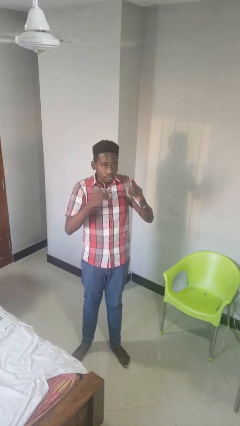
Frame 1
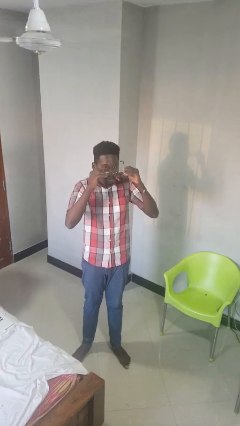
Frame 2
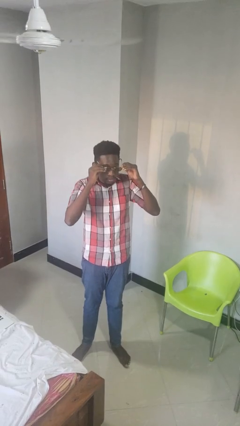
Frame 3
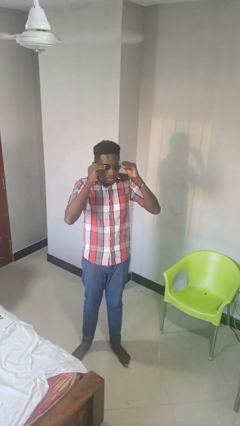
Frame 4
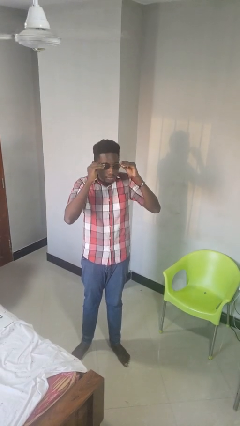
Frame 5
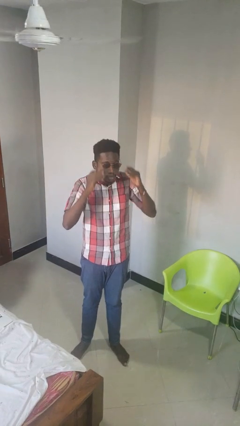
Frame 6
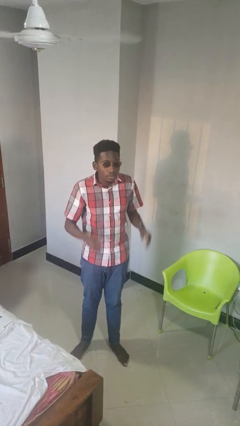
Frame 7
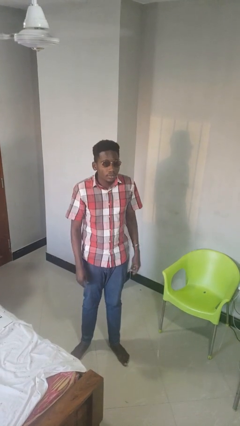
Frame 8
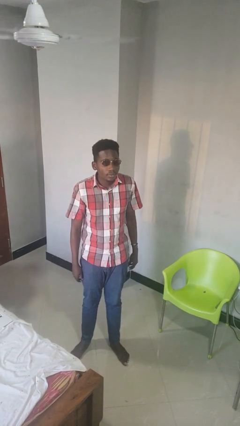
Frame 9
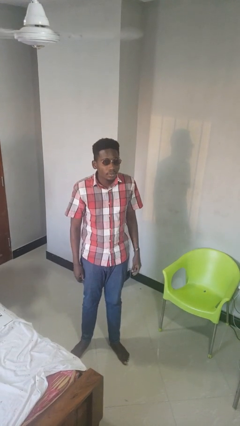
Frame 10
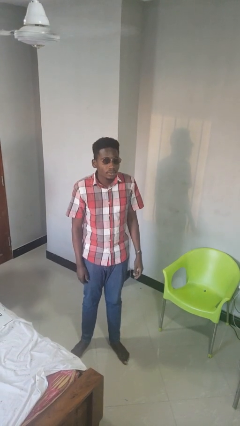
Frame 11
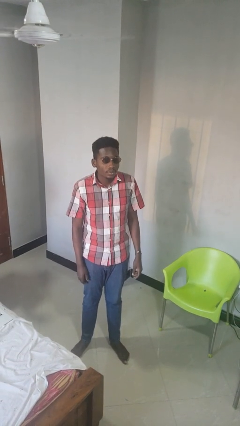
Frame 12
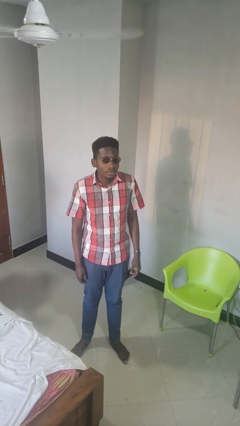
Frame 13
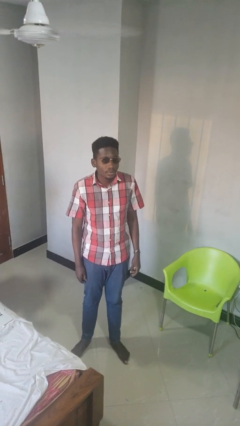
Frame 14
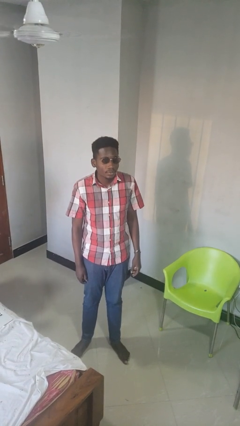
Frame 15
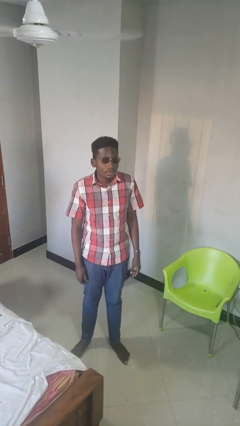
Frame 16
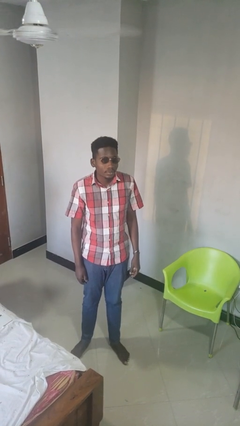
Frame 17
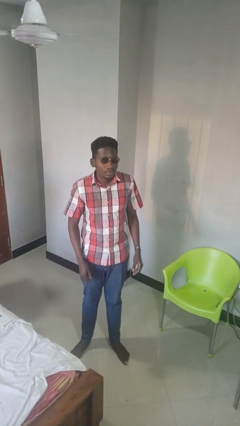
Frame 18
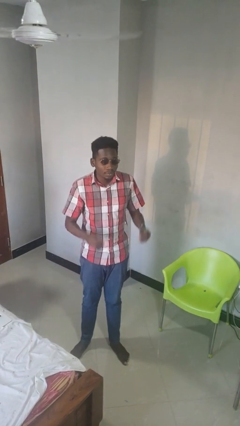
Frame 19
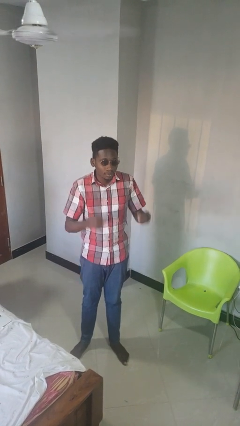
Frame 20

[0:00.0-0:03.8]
person puts on sunglasses

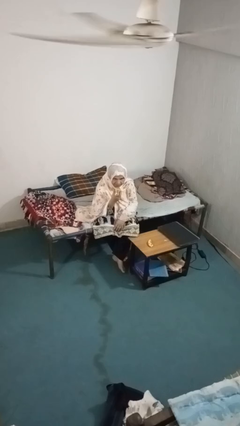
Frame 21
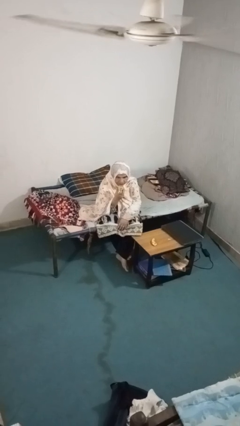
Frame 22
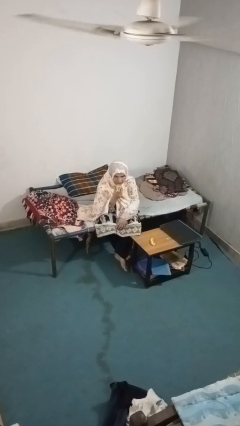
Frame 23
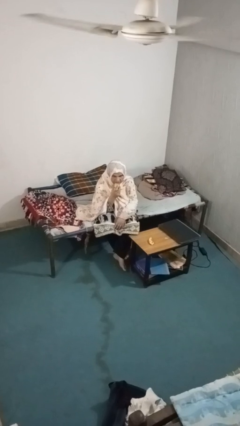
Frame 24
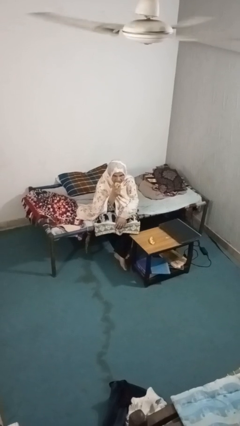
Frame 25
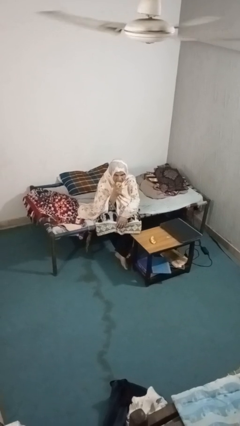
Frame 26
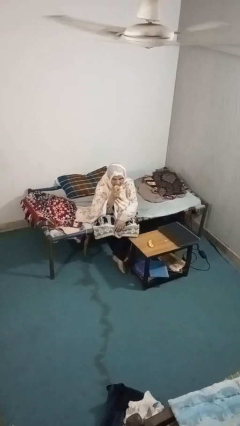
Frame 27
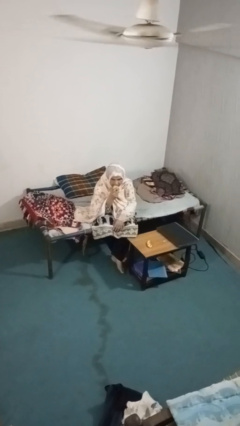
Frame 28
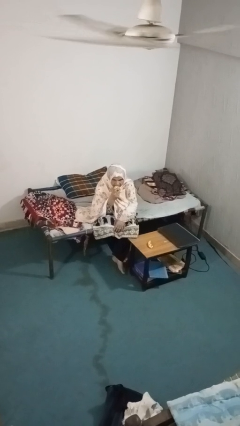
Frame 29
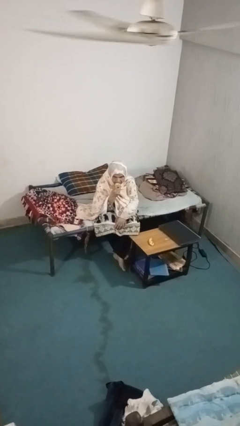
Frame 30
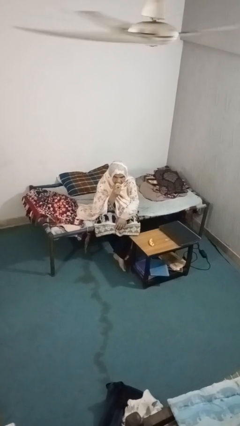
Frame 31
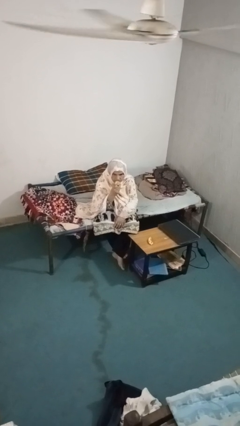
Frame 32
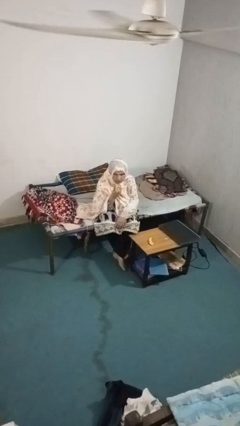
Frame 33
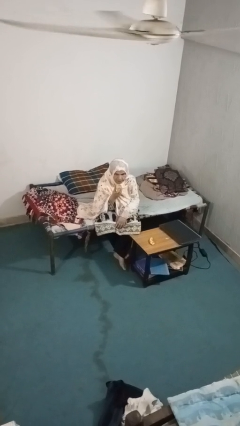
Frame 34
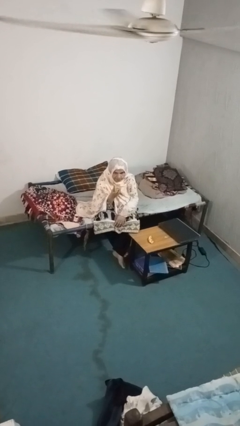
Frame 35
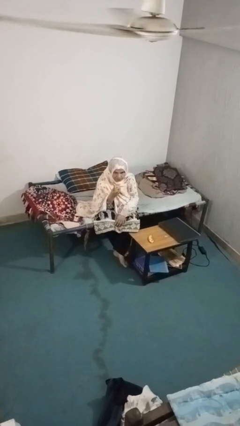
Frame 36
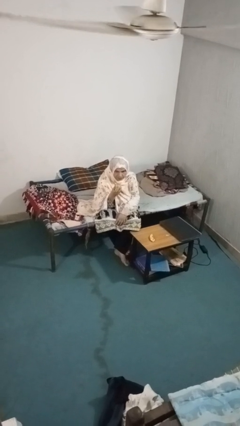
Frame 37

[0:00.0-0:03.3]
person eats apple

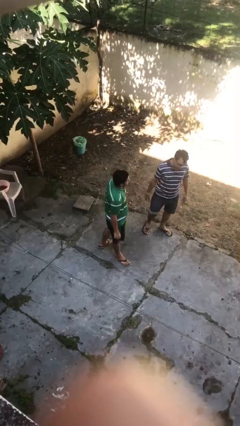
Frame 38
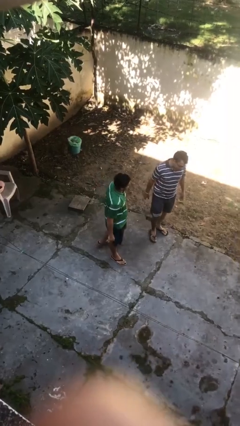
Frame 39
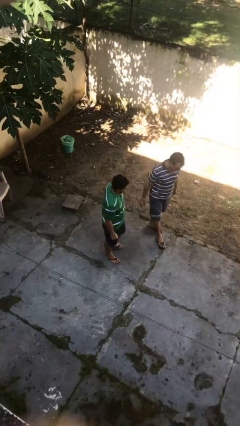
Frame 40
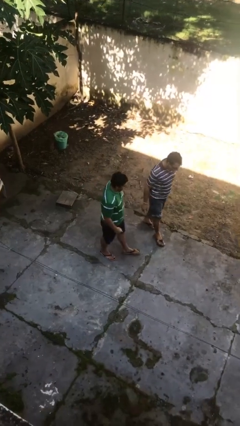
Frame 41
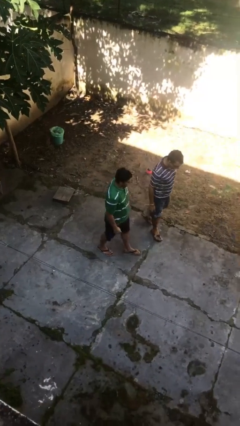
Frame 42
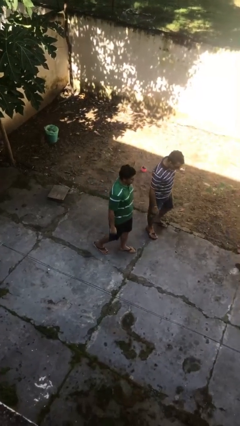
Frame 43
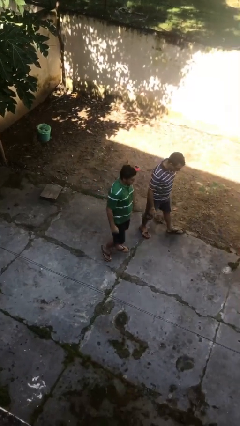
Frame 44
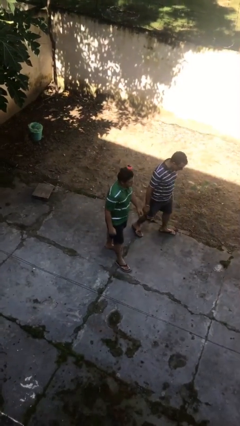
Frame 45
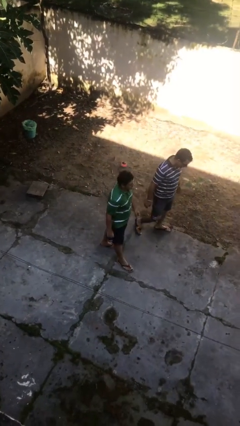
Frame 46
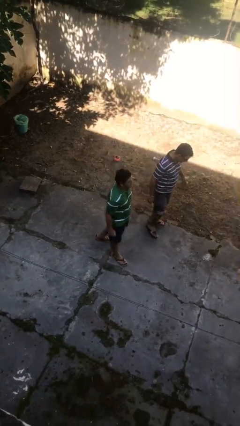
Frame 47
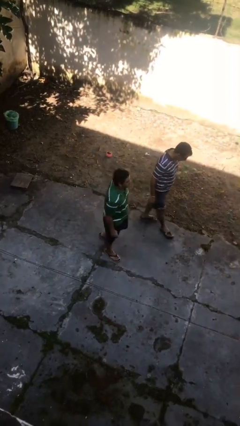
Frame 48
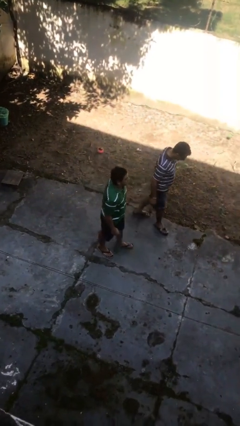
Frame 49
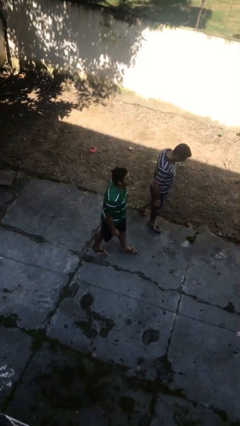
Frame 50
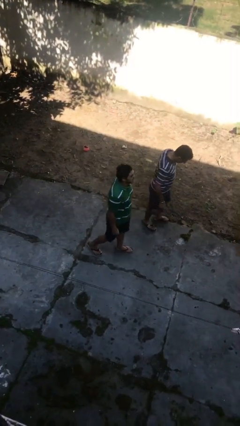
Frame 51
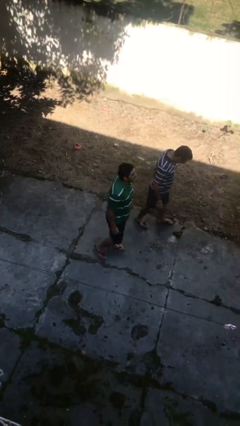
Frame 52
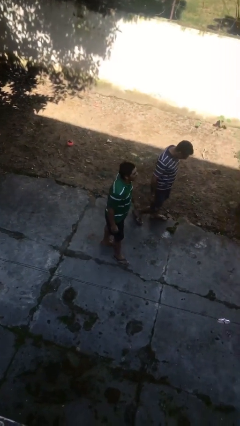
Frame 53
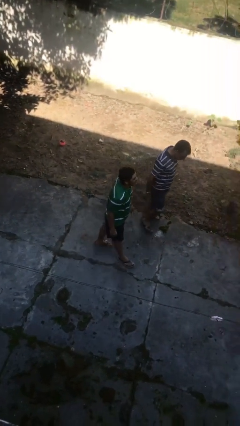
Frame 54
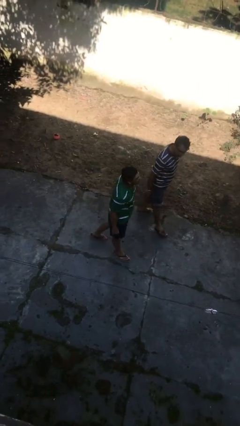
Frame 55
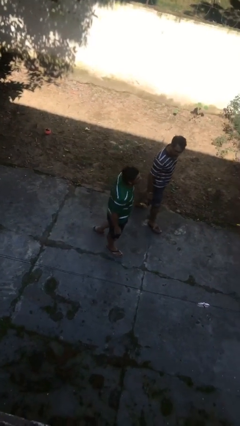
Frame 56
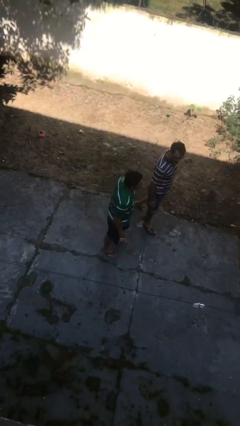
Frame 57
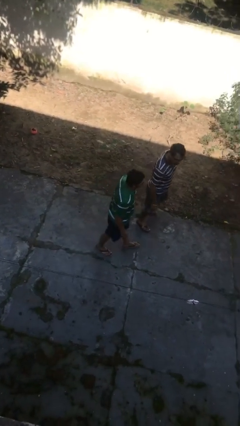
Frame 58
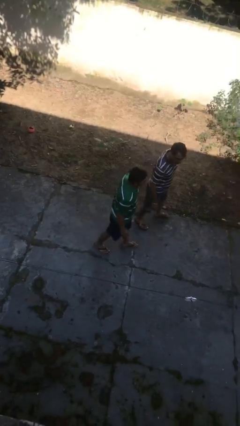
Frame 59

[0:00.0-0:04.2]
person talks to person

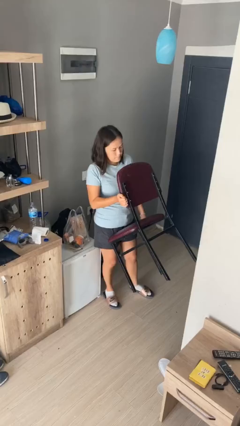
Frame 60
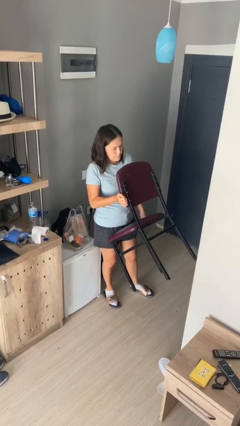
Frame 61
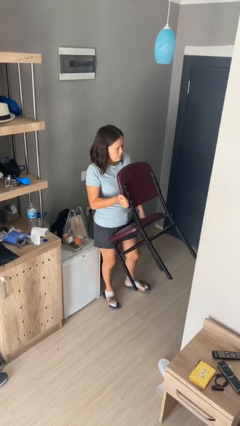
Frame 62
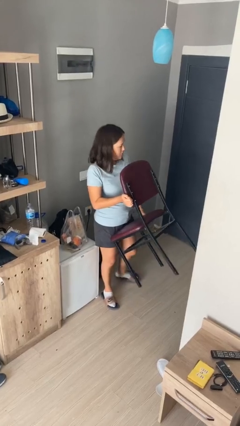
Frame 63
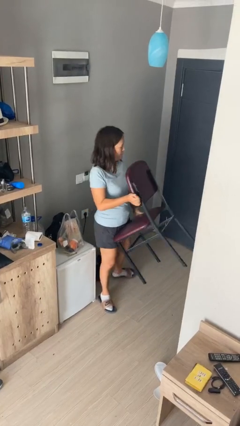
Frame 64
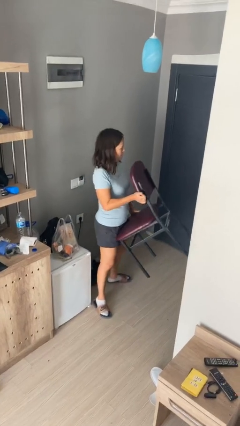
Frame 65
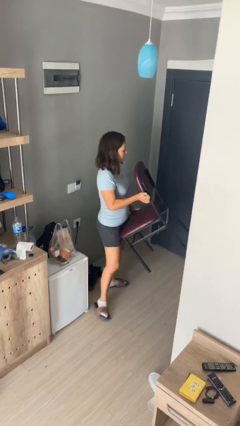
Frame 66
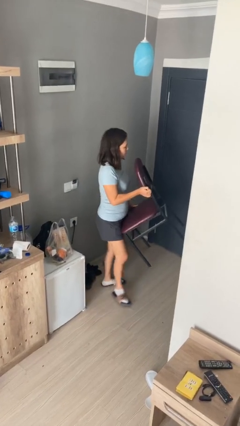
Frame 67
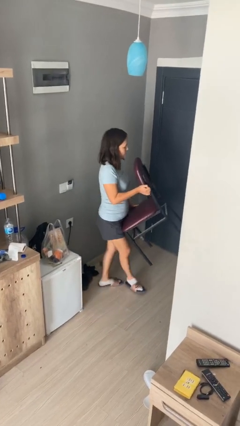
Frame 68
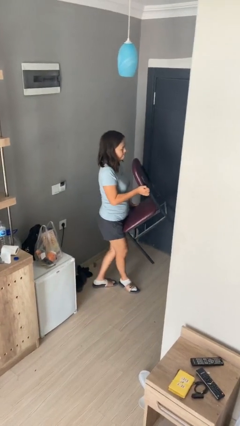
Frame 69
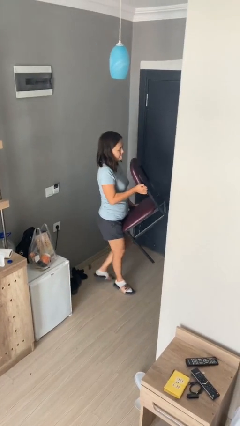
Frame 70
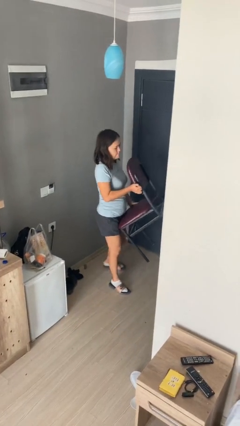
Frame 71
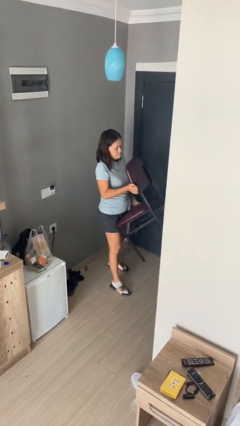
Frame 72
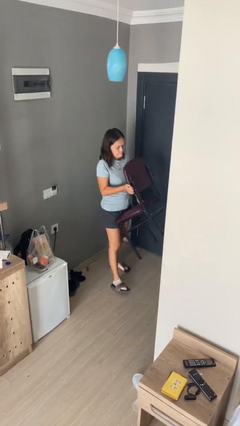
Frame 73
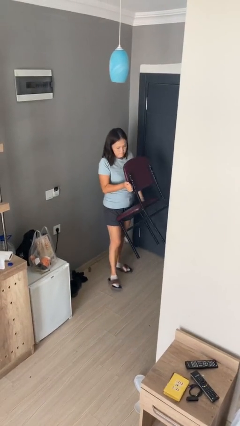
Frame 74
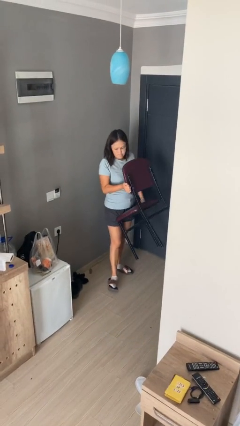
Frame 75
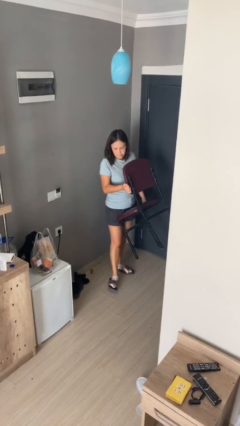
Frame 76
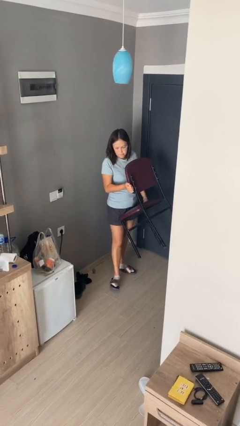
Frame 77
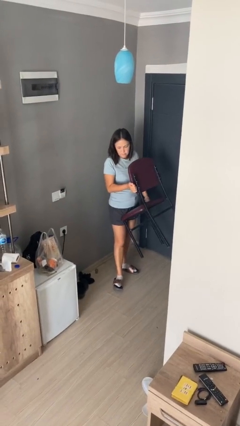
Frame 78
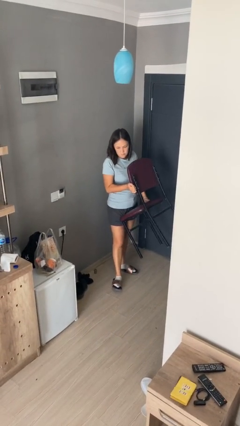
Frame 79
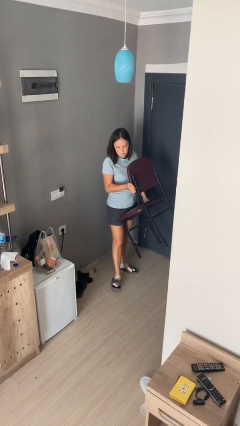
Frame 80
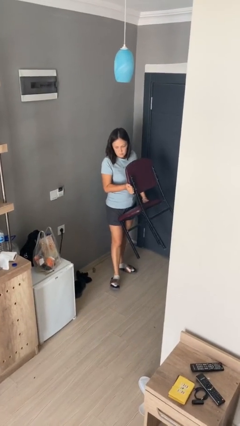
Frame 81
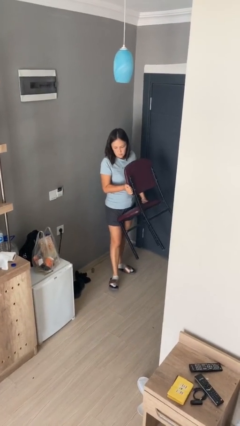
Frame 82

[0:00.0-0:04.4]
person carries furniture

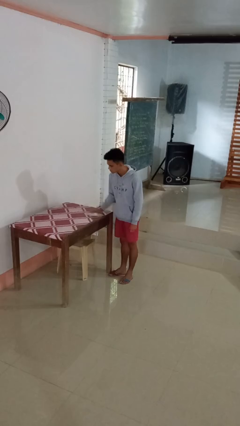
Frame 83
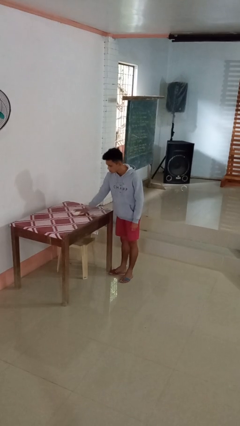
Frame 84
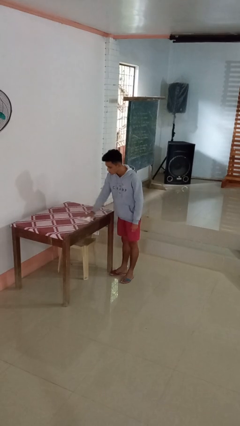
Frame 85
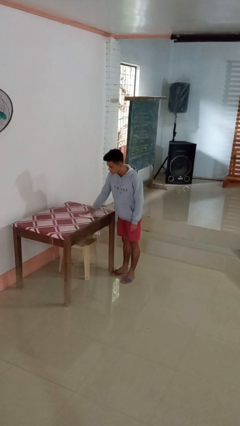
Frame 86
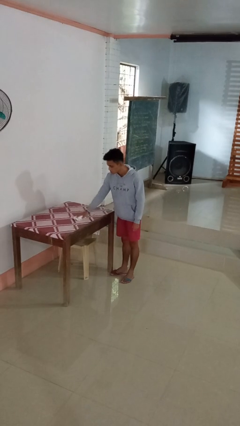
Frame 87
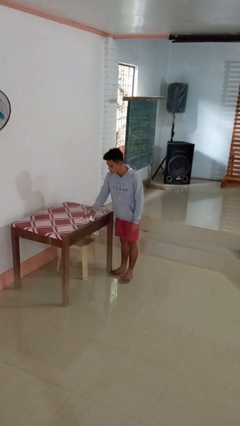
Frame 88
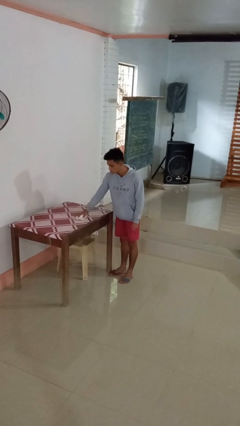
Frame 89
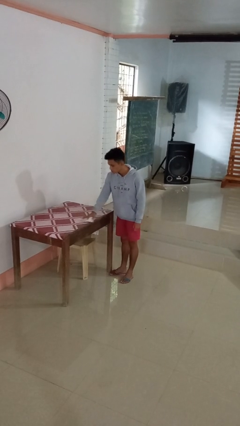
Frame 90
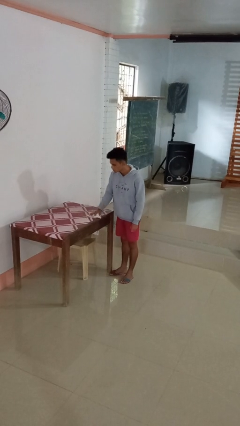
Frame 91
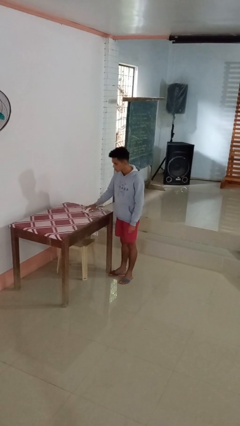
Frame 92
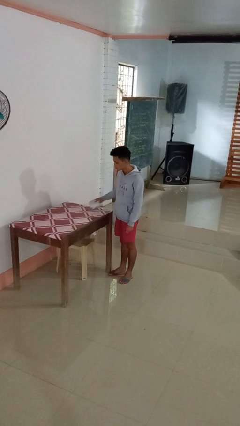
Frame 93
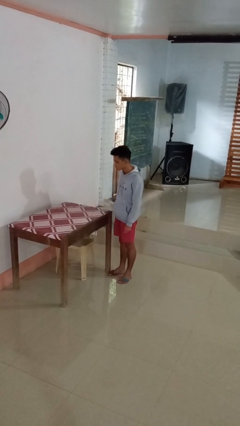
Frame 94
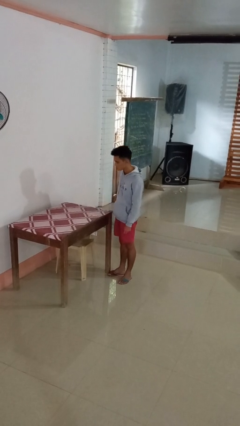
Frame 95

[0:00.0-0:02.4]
person cleans table with rag
